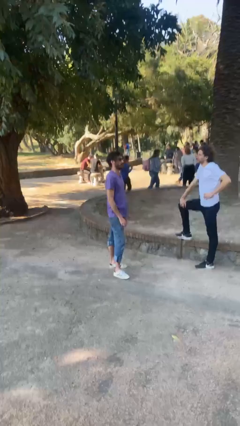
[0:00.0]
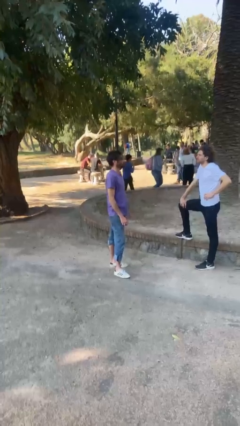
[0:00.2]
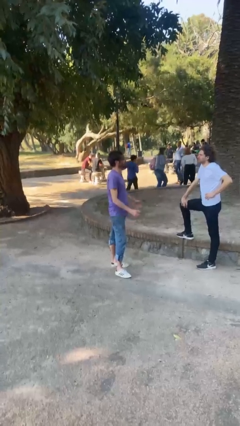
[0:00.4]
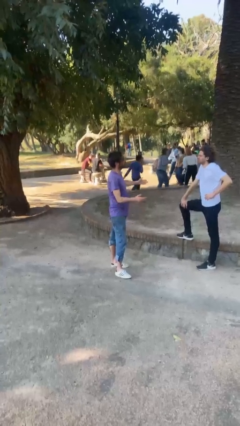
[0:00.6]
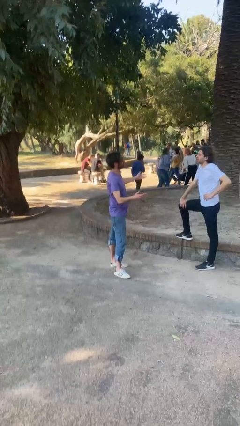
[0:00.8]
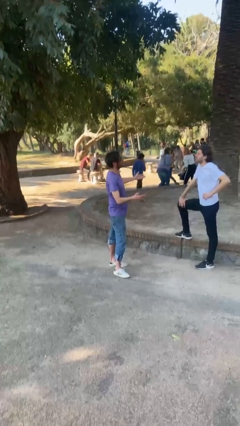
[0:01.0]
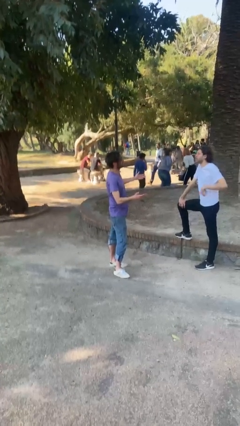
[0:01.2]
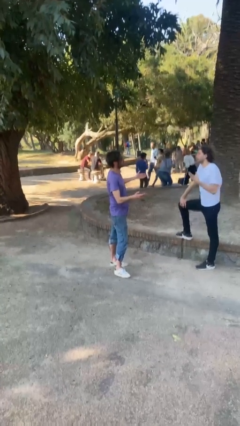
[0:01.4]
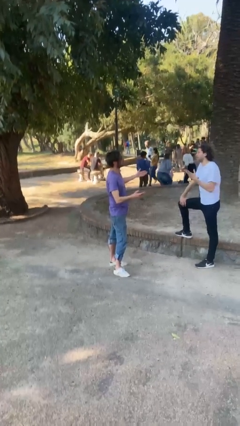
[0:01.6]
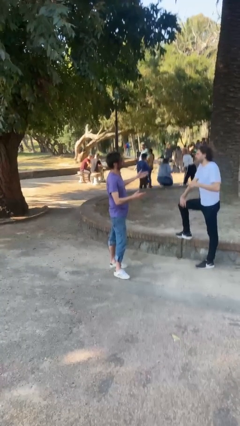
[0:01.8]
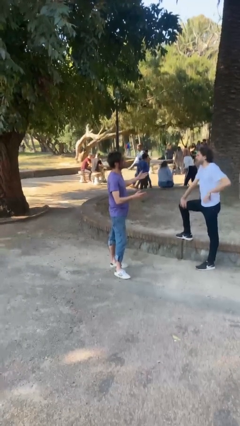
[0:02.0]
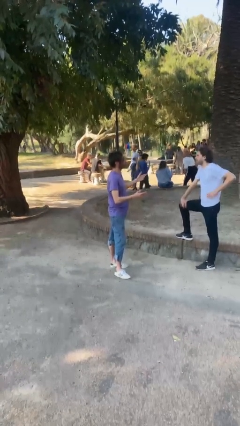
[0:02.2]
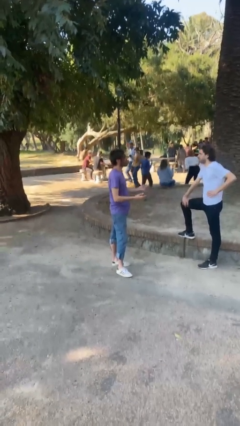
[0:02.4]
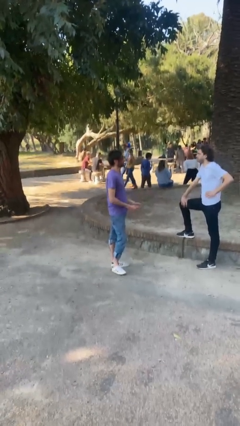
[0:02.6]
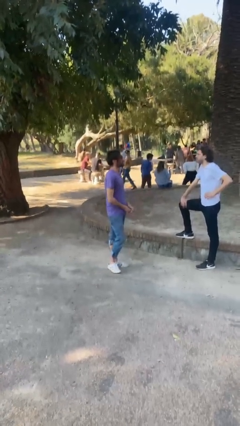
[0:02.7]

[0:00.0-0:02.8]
person talks to person

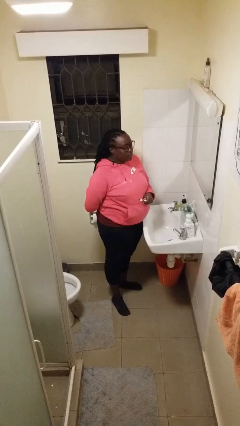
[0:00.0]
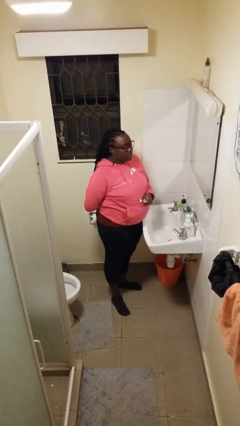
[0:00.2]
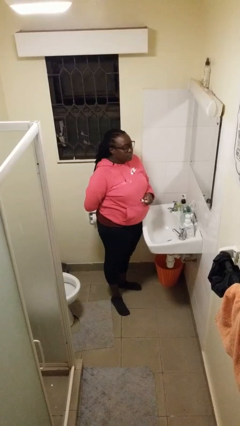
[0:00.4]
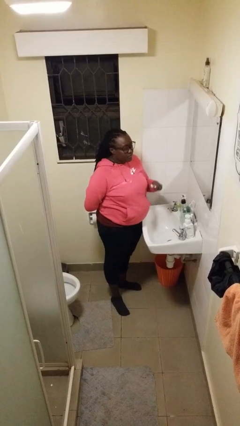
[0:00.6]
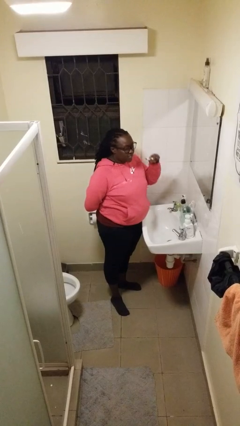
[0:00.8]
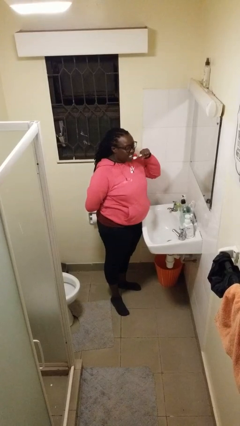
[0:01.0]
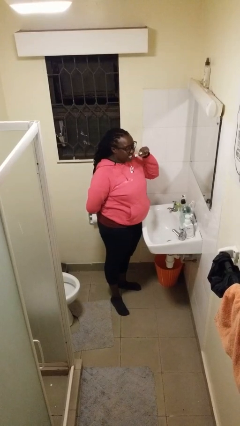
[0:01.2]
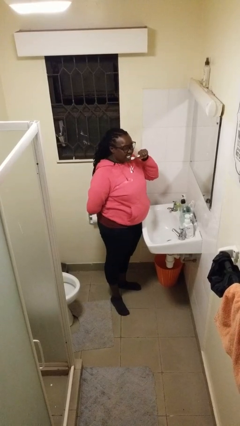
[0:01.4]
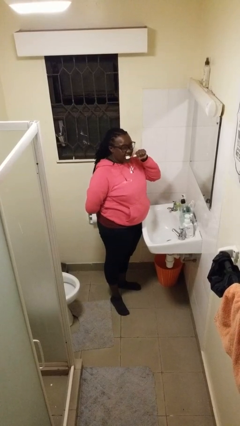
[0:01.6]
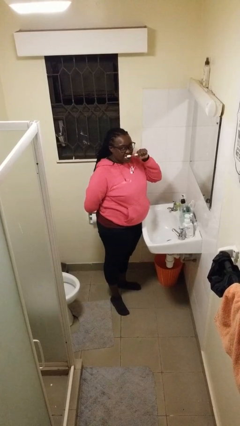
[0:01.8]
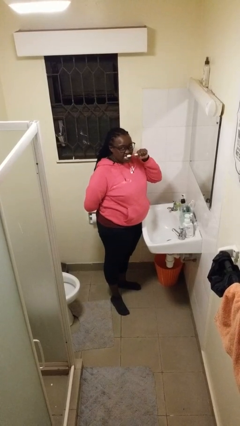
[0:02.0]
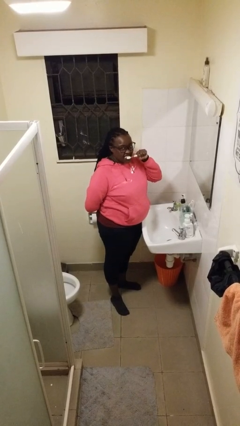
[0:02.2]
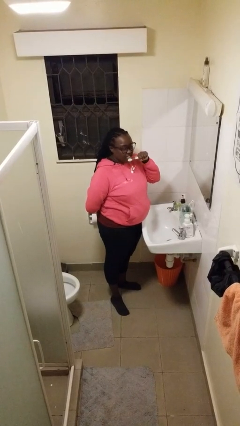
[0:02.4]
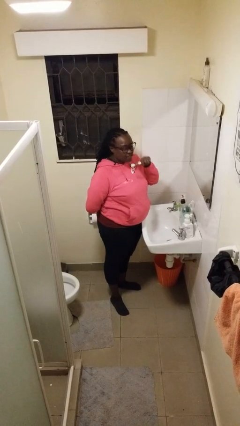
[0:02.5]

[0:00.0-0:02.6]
person brushes teeth

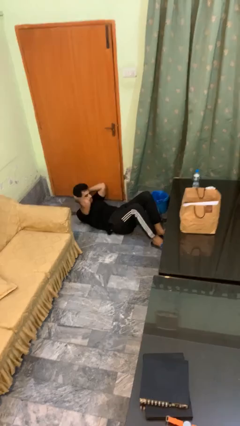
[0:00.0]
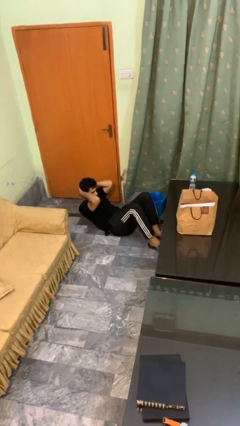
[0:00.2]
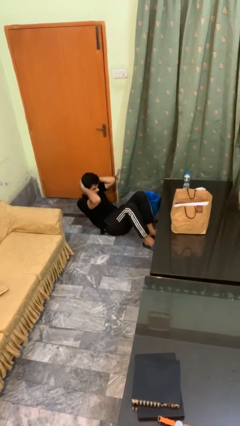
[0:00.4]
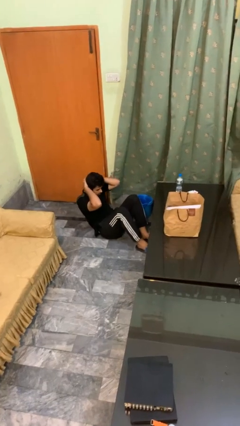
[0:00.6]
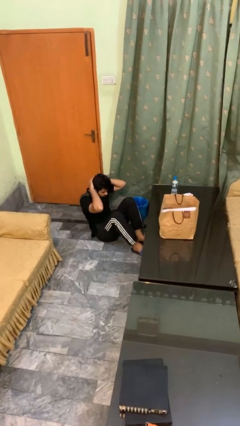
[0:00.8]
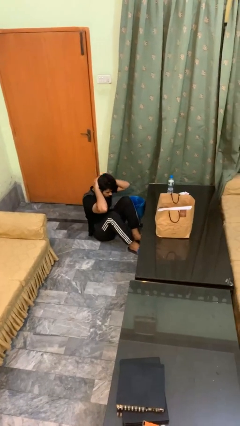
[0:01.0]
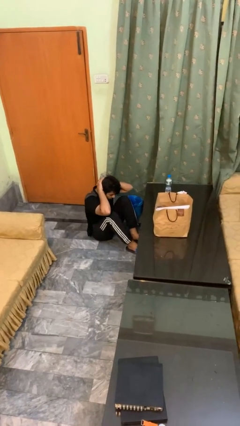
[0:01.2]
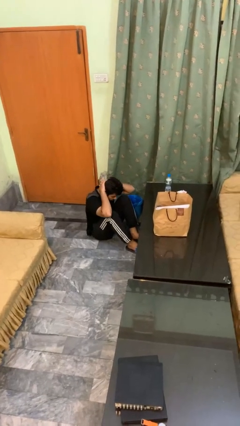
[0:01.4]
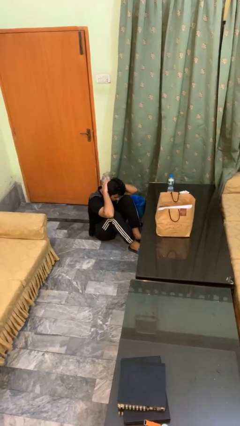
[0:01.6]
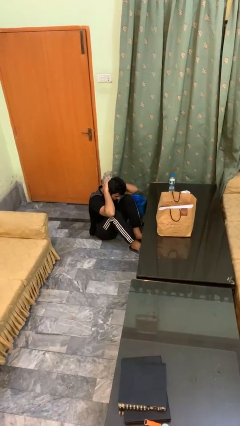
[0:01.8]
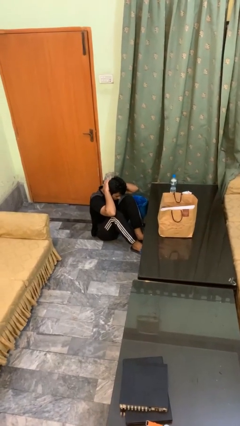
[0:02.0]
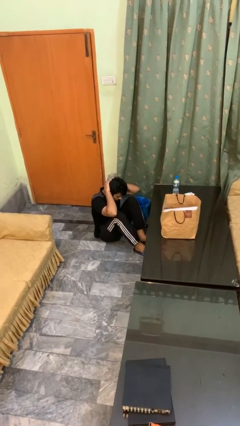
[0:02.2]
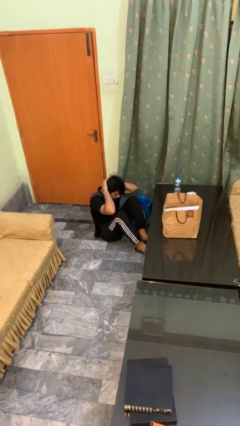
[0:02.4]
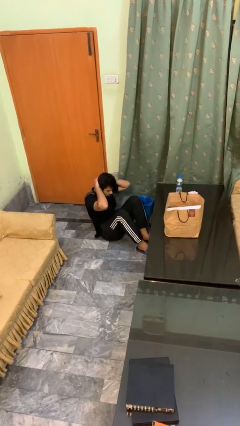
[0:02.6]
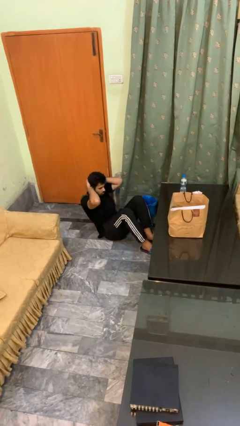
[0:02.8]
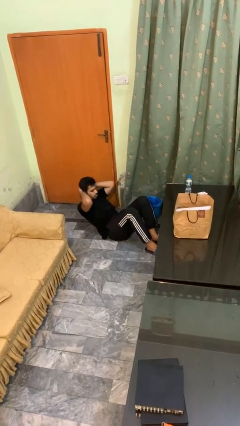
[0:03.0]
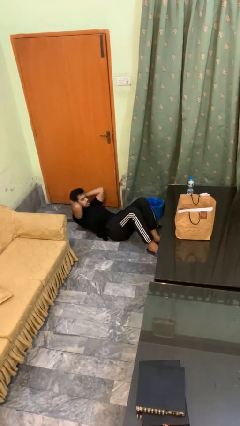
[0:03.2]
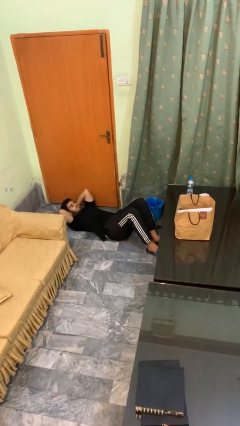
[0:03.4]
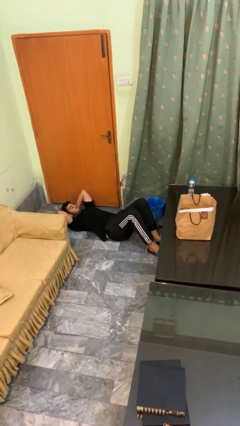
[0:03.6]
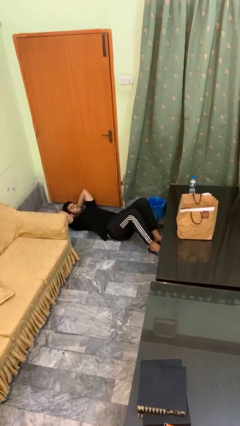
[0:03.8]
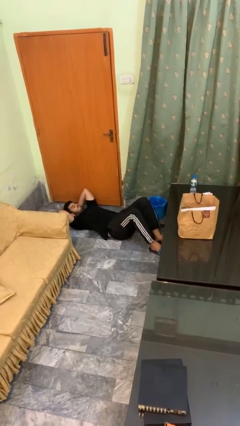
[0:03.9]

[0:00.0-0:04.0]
person exercises with situp

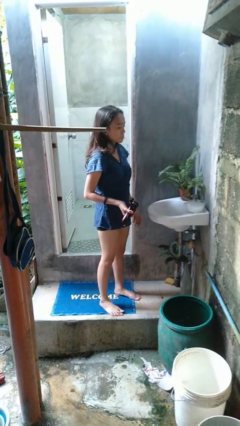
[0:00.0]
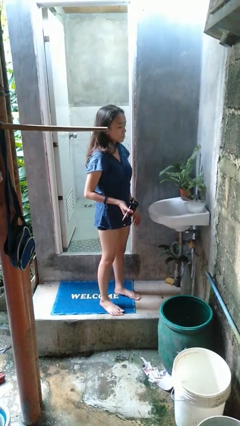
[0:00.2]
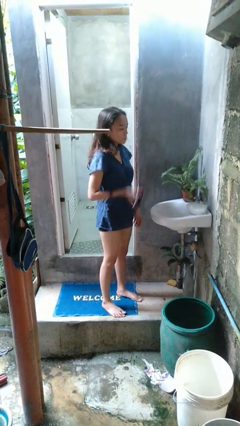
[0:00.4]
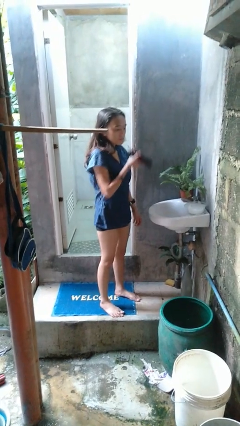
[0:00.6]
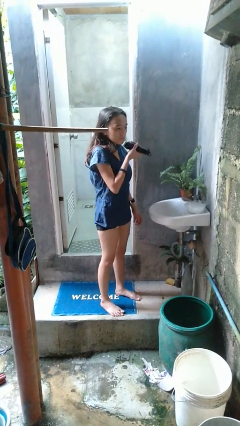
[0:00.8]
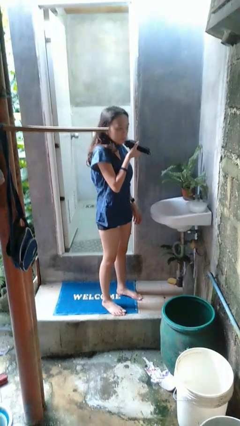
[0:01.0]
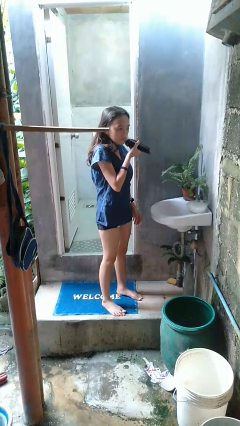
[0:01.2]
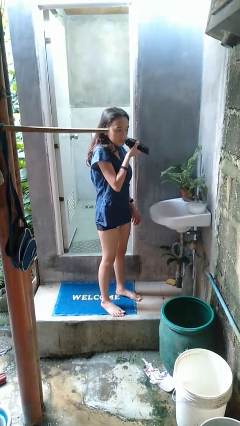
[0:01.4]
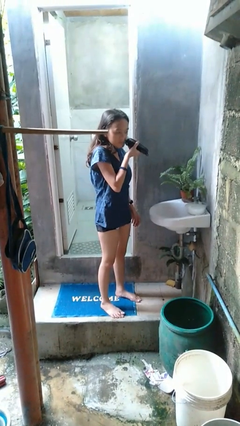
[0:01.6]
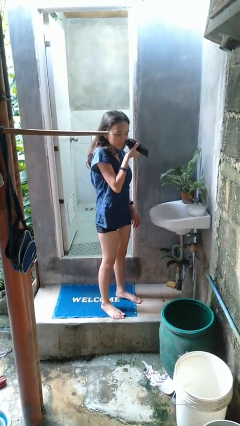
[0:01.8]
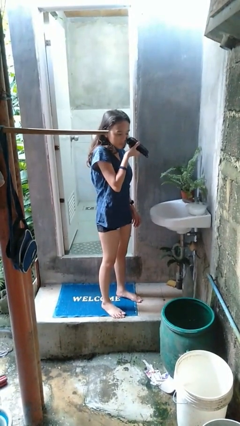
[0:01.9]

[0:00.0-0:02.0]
person shaves face

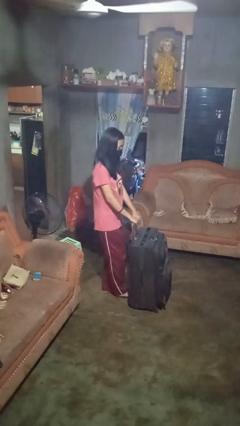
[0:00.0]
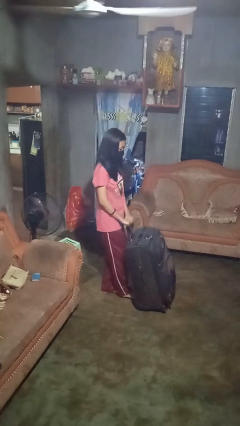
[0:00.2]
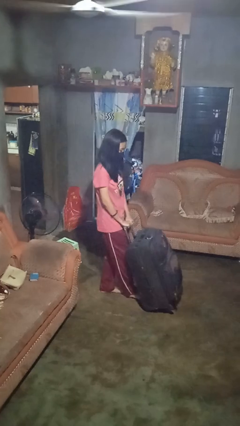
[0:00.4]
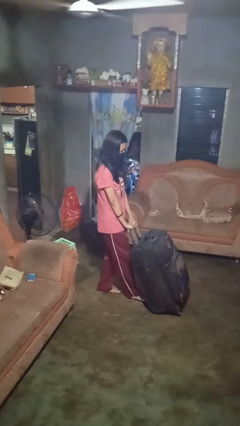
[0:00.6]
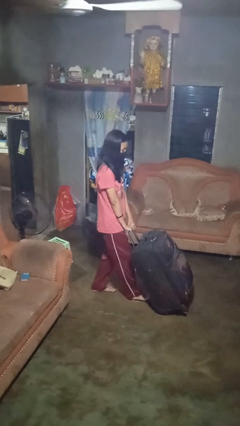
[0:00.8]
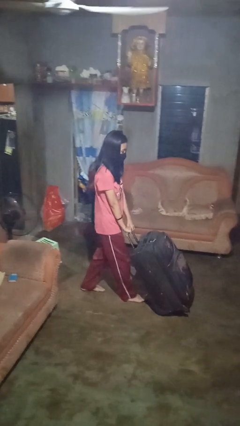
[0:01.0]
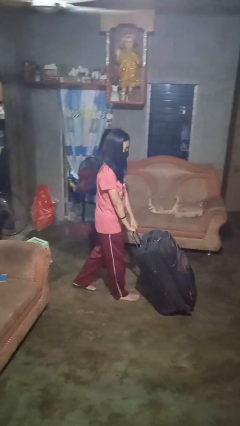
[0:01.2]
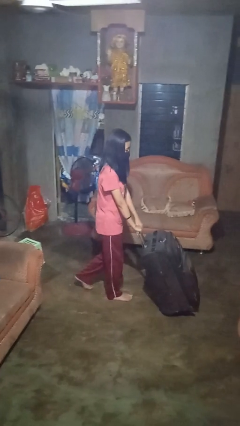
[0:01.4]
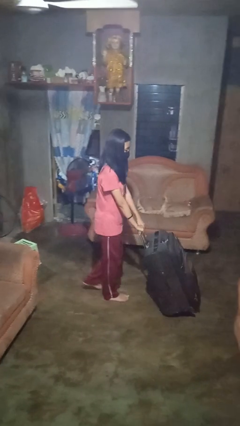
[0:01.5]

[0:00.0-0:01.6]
person pushes wheeled cart

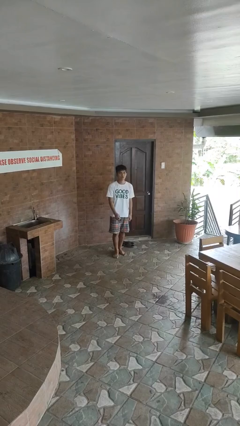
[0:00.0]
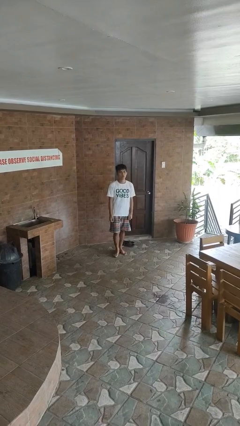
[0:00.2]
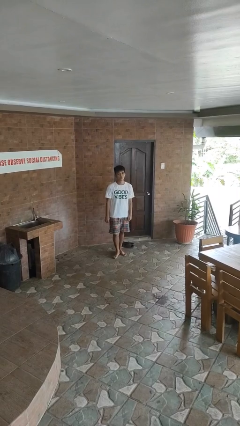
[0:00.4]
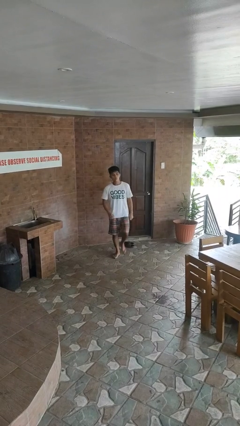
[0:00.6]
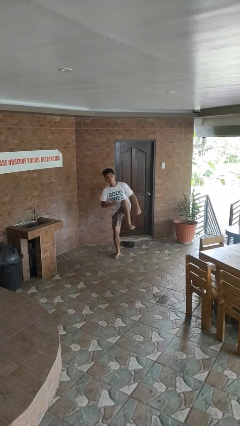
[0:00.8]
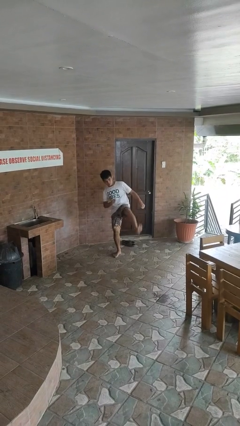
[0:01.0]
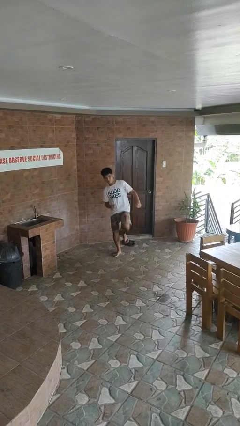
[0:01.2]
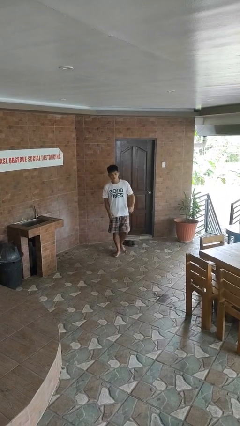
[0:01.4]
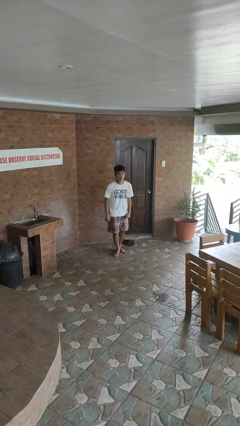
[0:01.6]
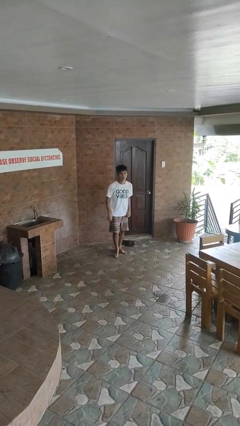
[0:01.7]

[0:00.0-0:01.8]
person karate kicks

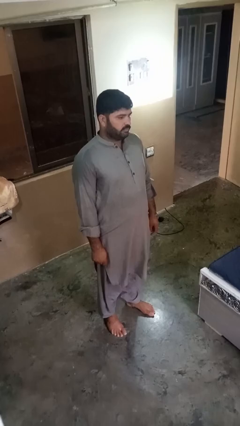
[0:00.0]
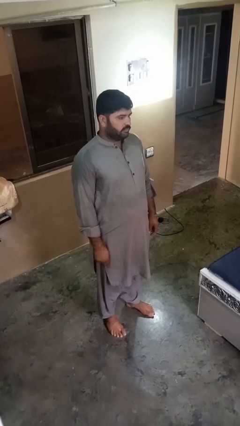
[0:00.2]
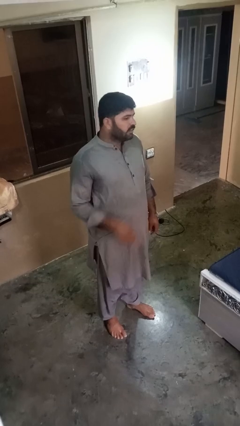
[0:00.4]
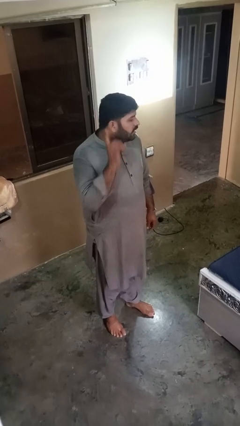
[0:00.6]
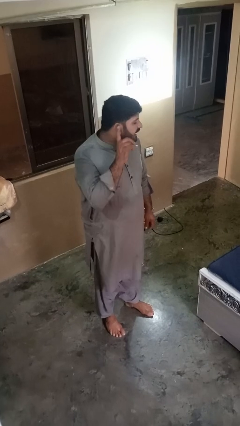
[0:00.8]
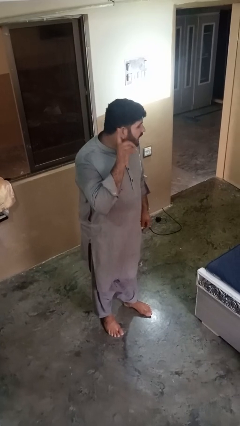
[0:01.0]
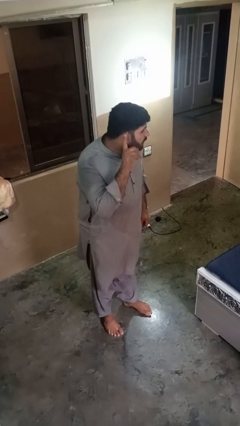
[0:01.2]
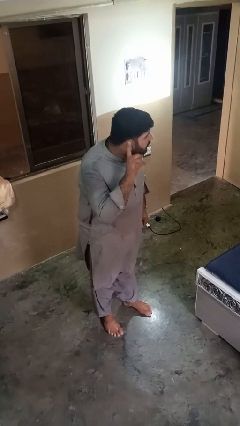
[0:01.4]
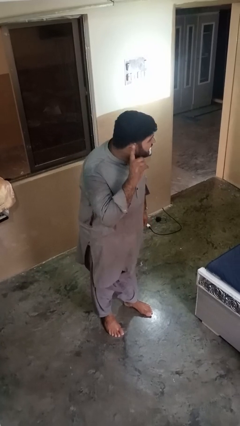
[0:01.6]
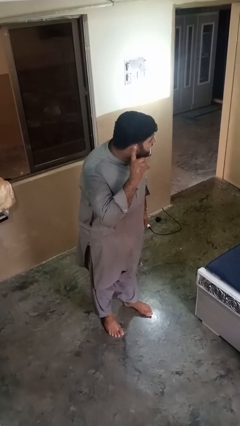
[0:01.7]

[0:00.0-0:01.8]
person gestures listen closely

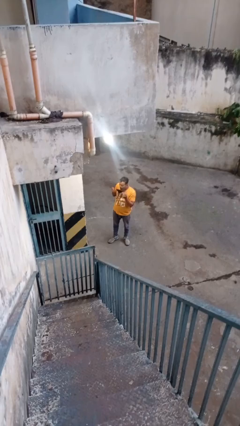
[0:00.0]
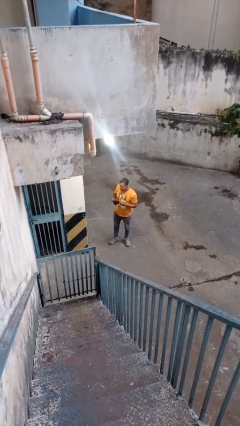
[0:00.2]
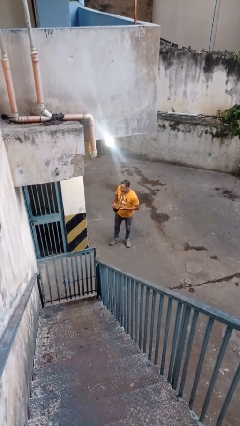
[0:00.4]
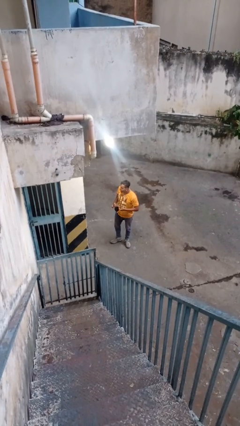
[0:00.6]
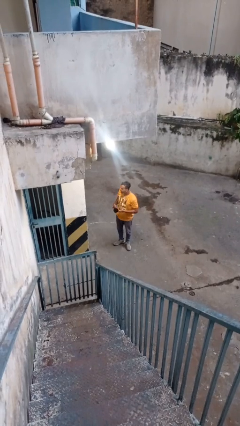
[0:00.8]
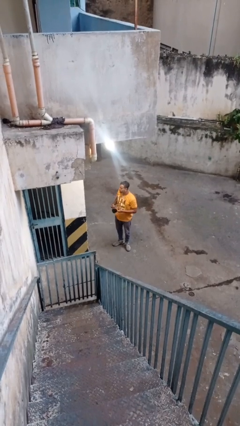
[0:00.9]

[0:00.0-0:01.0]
person takes off facemask
